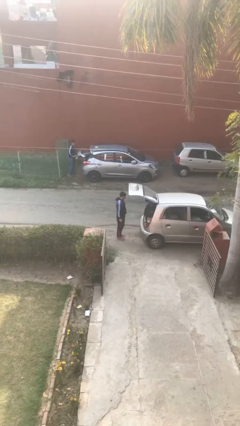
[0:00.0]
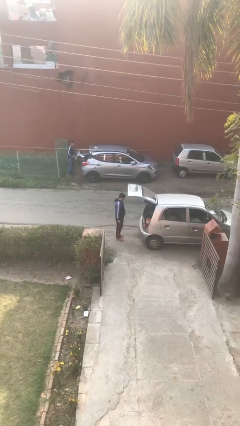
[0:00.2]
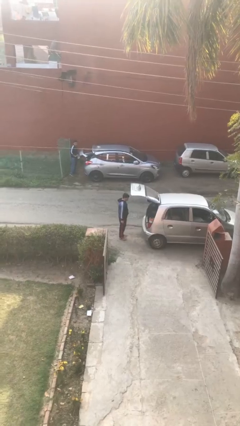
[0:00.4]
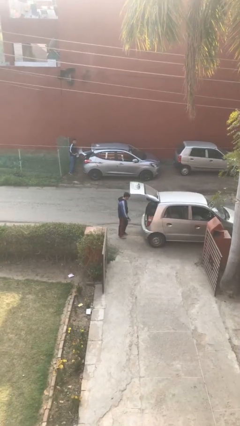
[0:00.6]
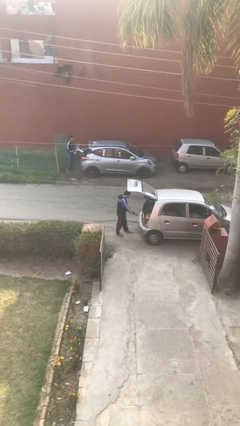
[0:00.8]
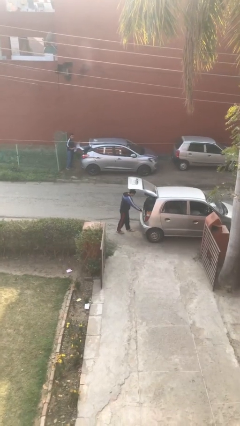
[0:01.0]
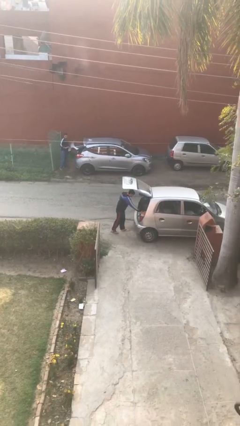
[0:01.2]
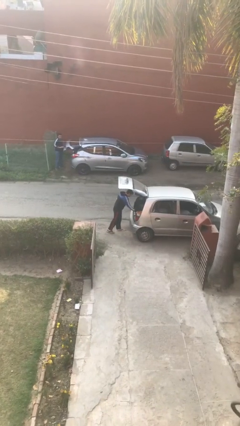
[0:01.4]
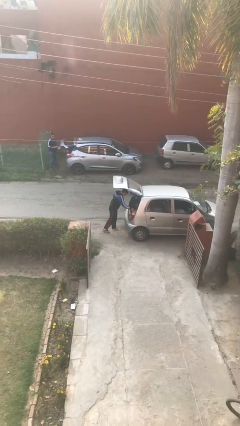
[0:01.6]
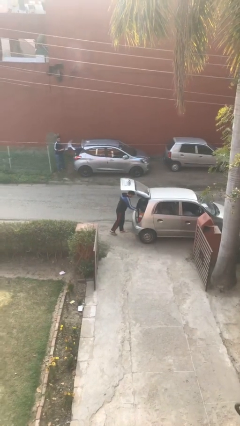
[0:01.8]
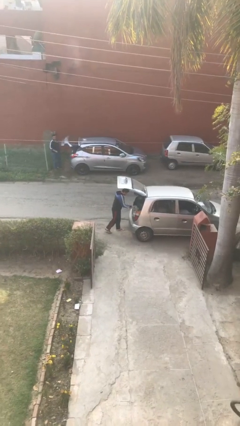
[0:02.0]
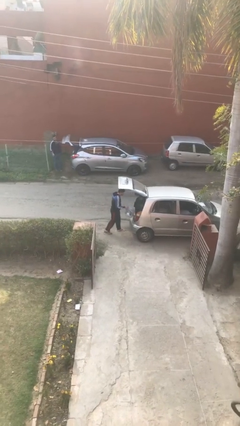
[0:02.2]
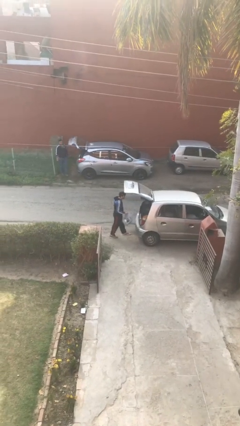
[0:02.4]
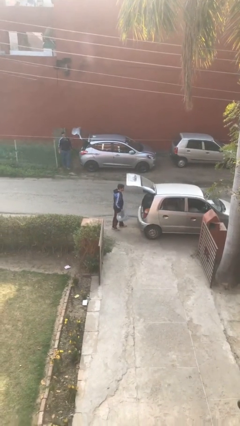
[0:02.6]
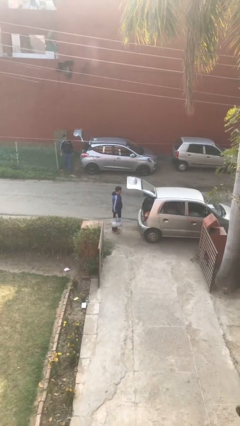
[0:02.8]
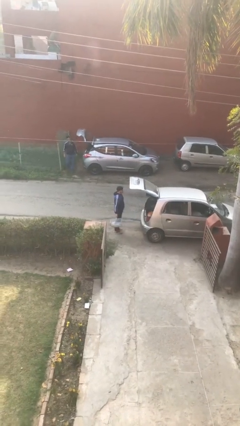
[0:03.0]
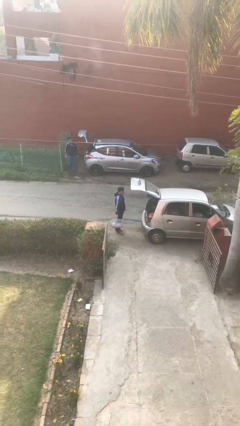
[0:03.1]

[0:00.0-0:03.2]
person unloads car

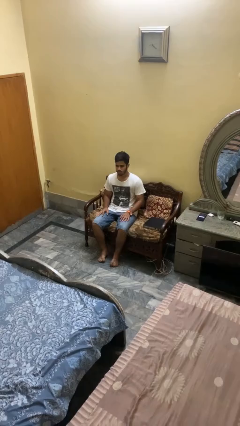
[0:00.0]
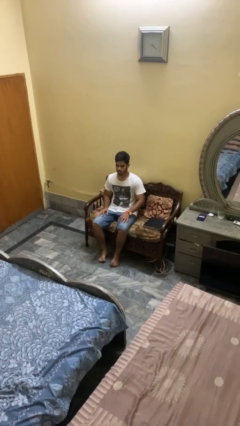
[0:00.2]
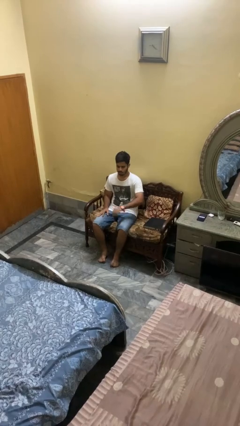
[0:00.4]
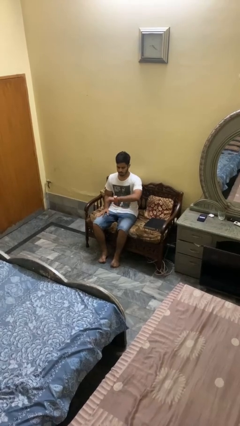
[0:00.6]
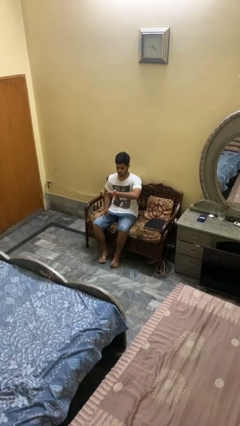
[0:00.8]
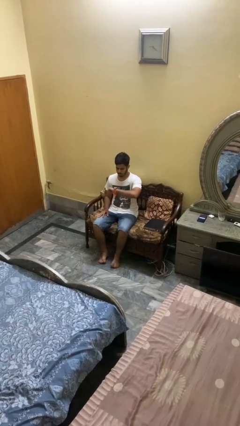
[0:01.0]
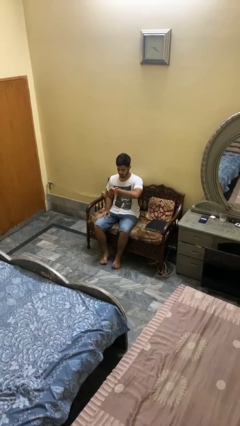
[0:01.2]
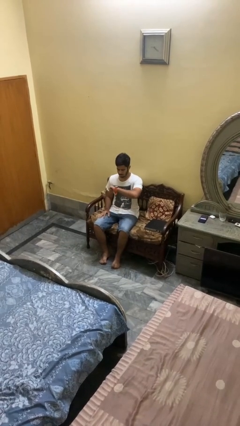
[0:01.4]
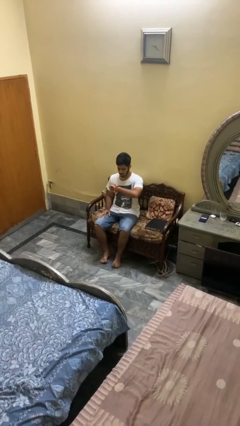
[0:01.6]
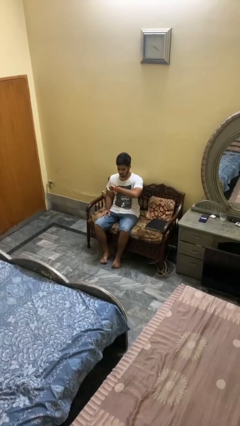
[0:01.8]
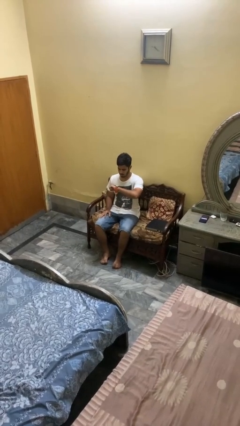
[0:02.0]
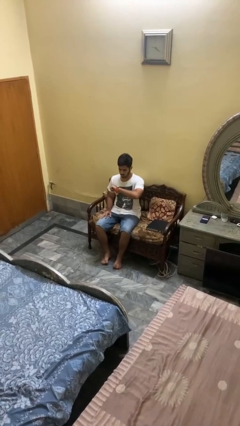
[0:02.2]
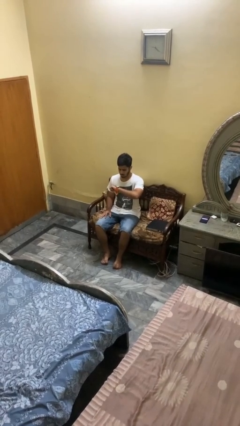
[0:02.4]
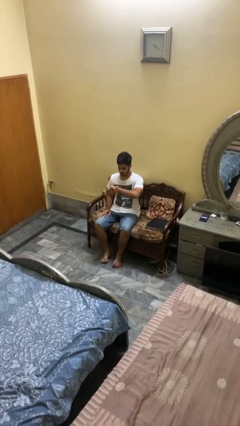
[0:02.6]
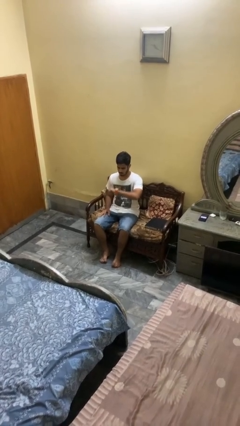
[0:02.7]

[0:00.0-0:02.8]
person looks at wristwatch

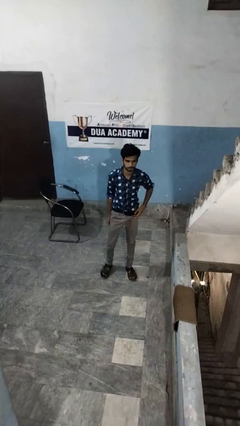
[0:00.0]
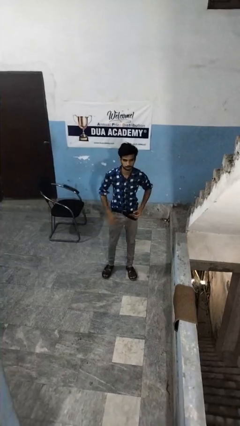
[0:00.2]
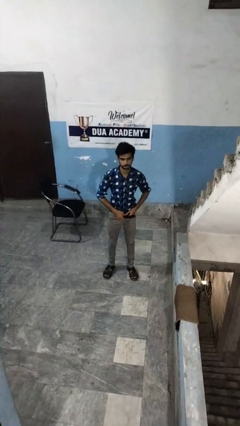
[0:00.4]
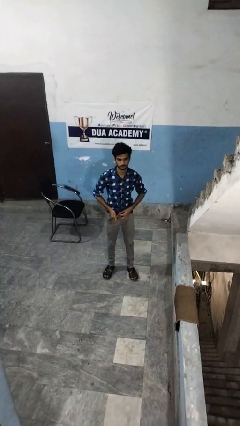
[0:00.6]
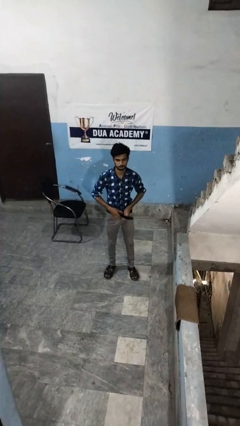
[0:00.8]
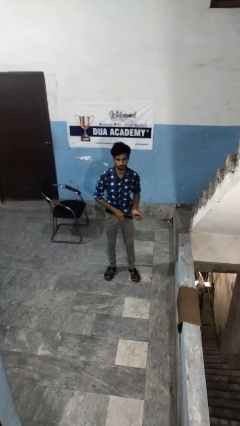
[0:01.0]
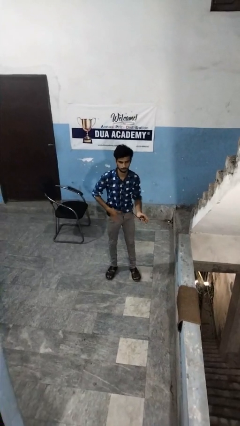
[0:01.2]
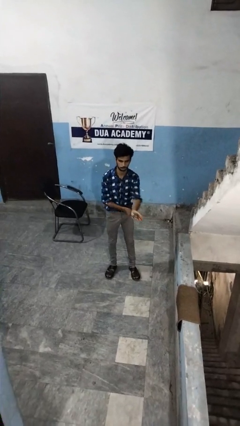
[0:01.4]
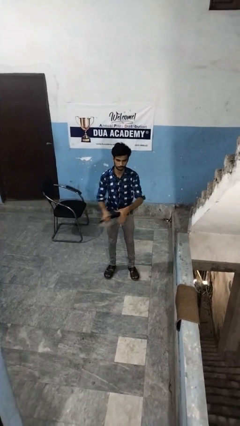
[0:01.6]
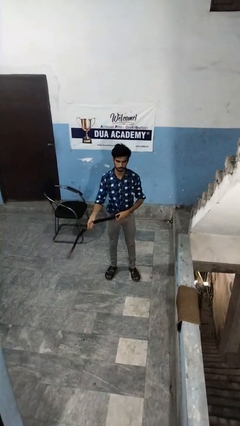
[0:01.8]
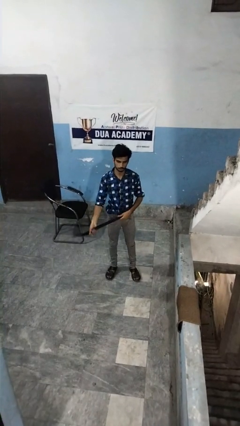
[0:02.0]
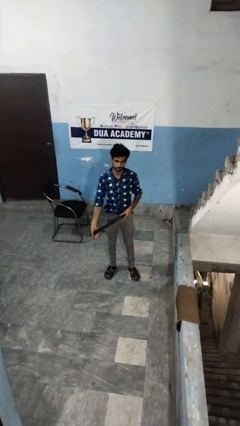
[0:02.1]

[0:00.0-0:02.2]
person takes off belt

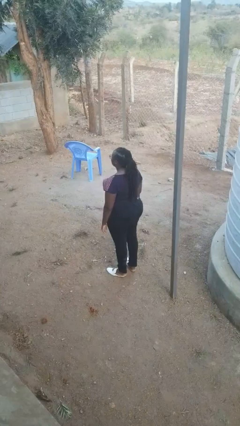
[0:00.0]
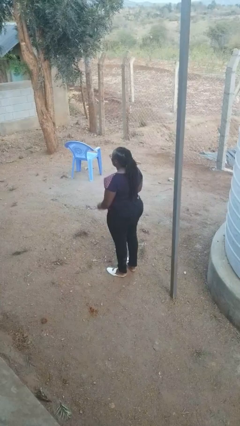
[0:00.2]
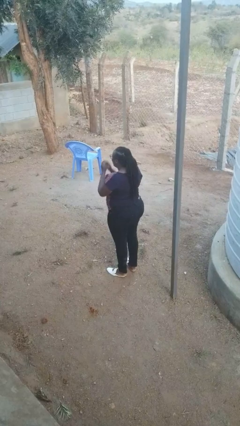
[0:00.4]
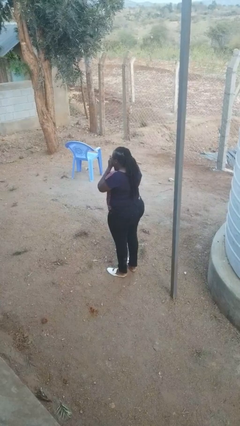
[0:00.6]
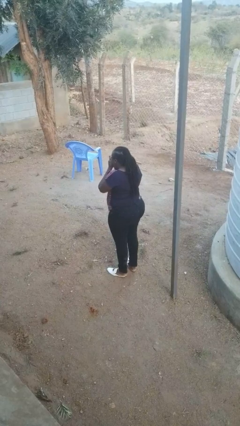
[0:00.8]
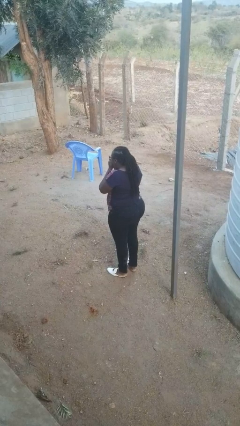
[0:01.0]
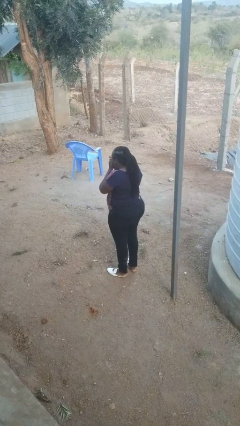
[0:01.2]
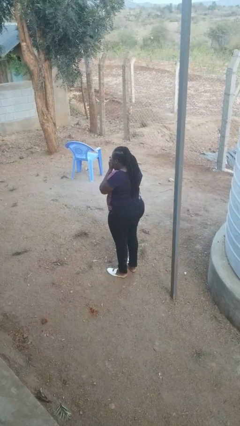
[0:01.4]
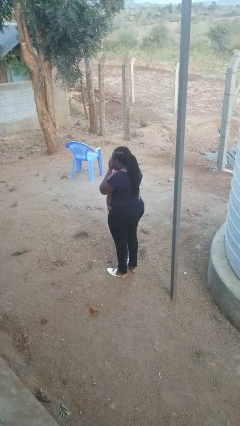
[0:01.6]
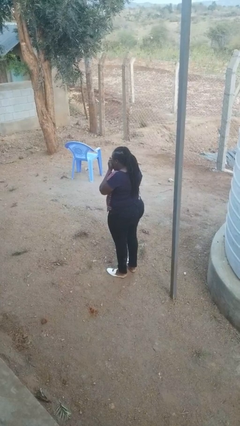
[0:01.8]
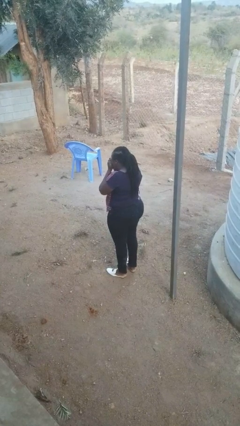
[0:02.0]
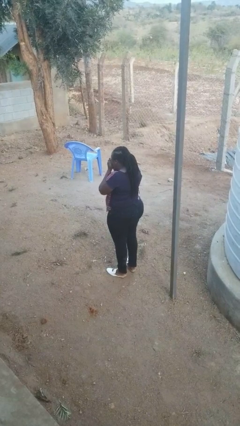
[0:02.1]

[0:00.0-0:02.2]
person sneezes into hand

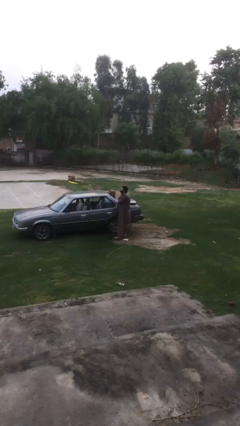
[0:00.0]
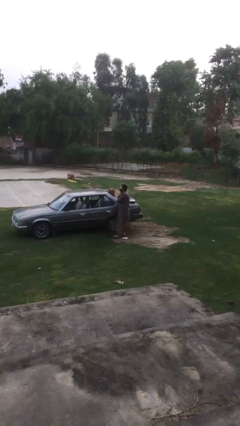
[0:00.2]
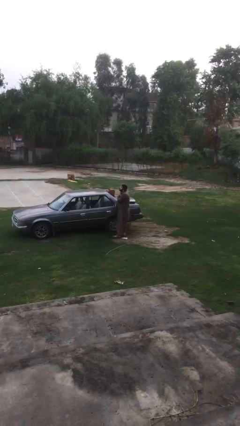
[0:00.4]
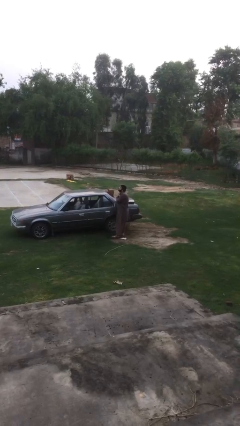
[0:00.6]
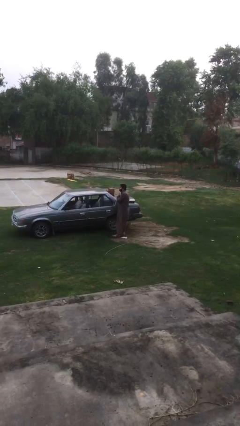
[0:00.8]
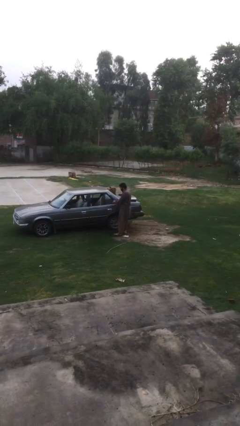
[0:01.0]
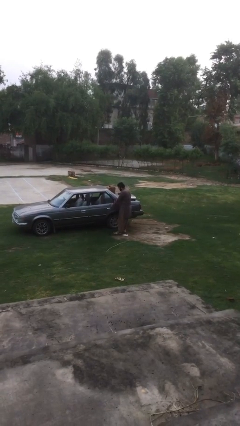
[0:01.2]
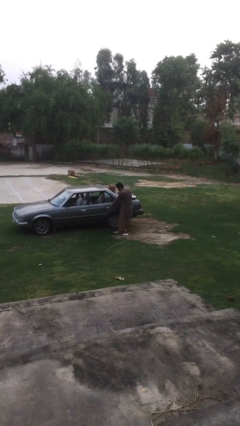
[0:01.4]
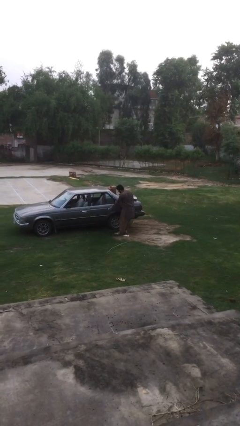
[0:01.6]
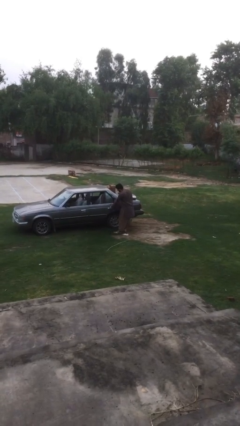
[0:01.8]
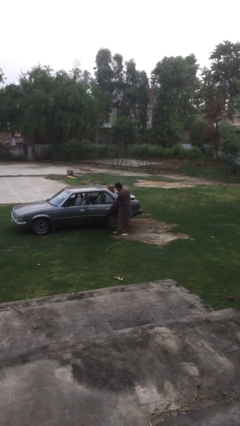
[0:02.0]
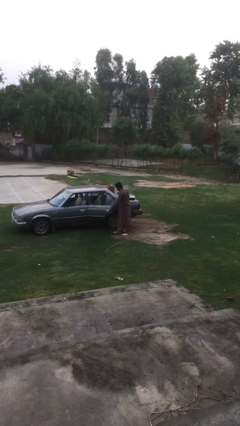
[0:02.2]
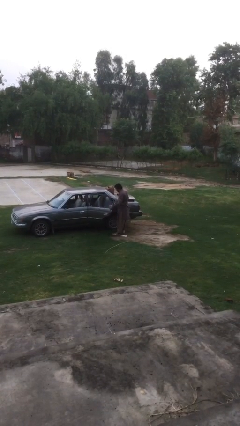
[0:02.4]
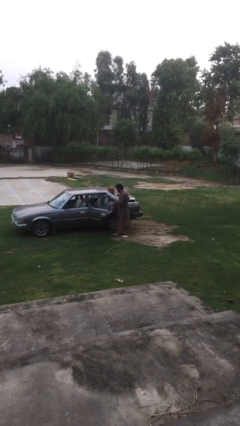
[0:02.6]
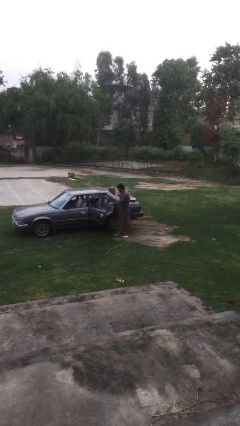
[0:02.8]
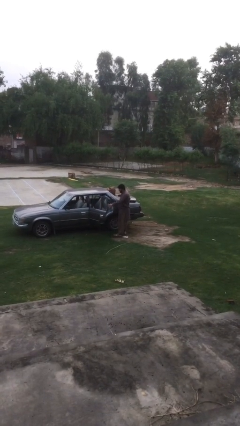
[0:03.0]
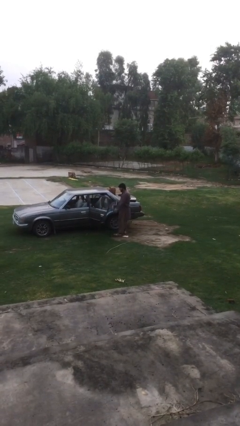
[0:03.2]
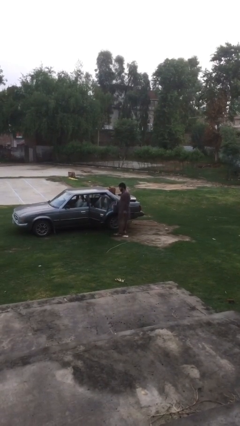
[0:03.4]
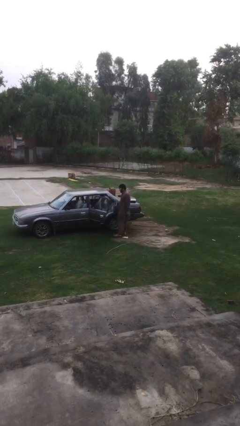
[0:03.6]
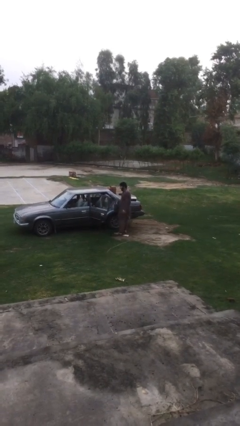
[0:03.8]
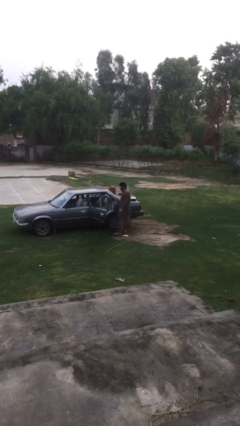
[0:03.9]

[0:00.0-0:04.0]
person opens car door

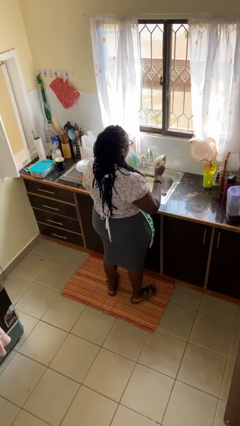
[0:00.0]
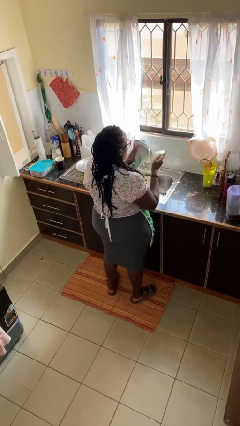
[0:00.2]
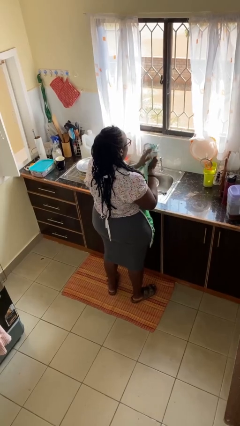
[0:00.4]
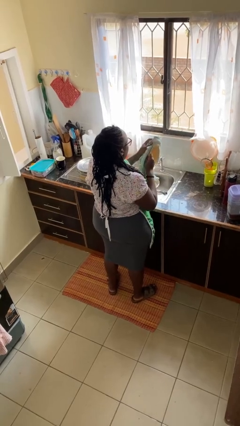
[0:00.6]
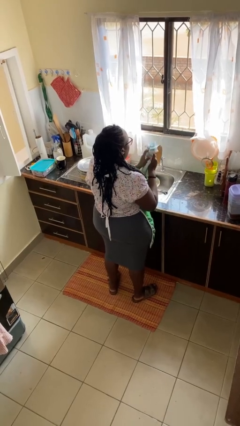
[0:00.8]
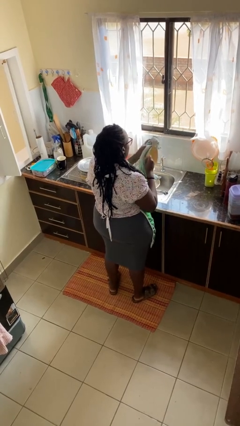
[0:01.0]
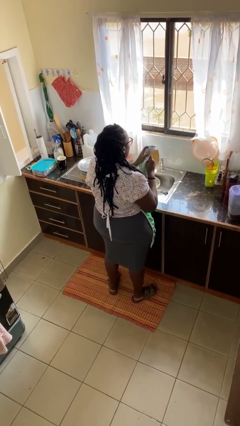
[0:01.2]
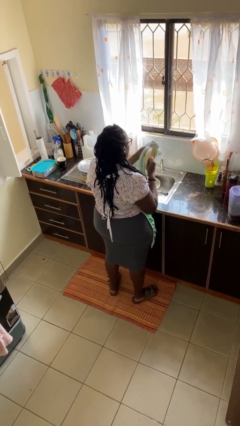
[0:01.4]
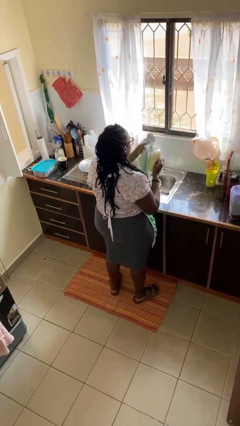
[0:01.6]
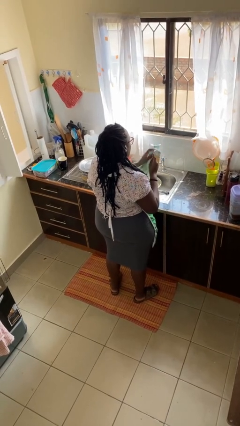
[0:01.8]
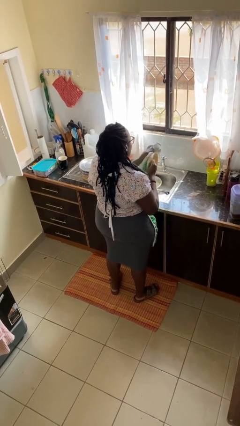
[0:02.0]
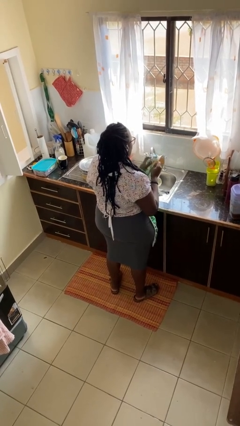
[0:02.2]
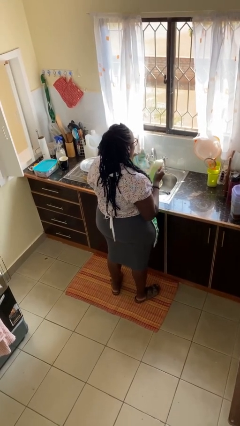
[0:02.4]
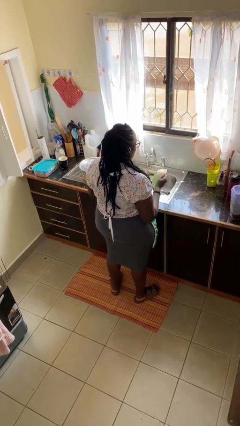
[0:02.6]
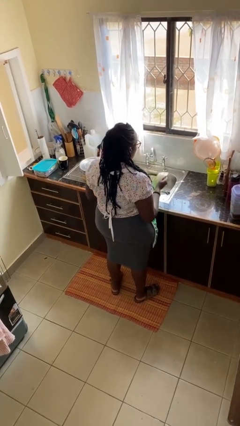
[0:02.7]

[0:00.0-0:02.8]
person dries dish

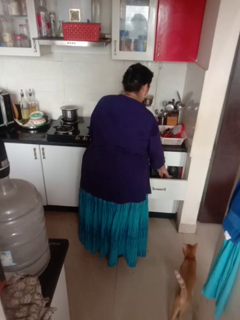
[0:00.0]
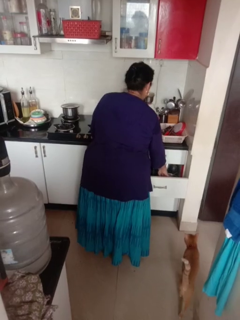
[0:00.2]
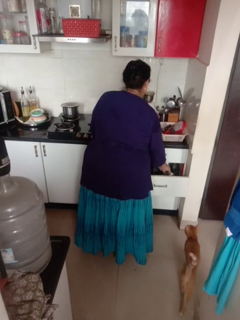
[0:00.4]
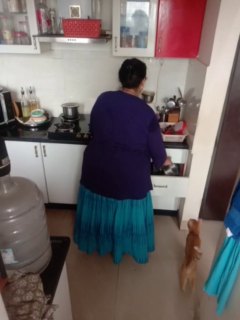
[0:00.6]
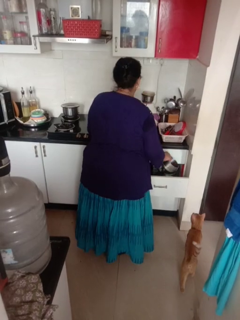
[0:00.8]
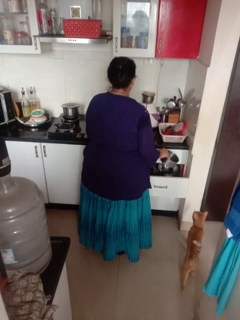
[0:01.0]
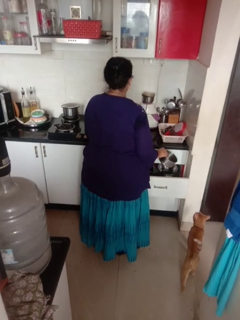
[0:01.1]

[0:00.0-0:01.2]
person takes object from kitchen drawer
